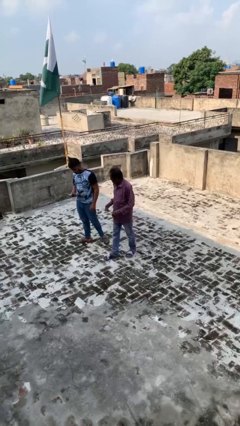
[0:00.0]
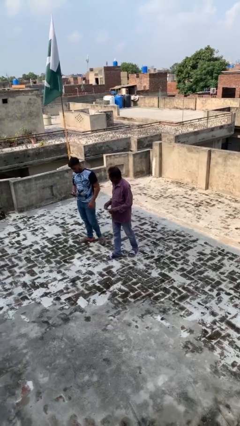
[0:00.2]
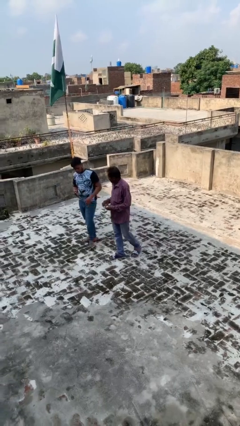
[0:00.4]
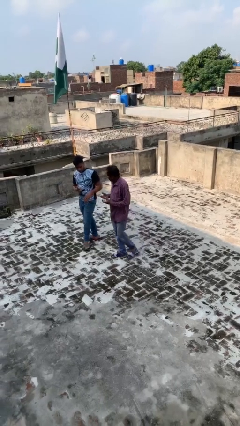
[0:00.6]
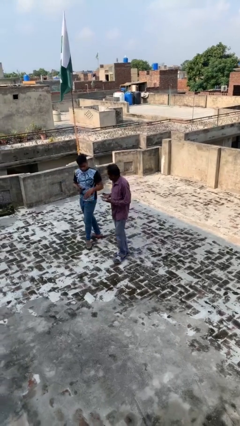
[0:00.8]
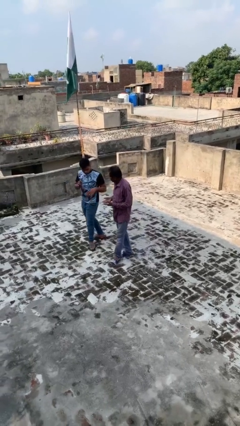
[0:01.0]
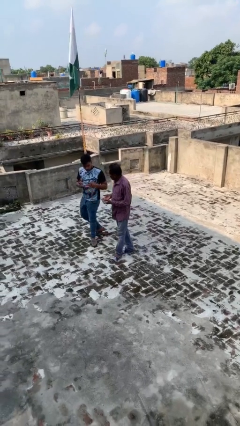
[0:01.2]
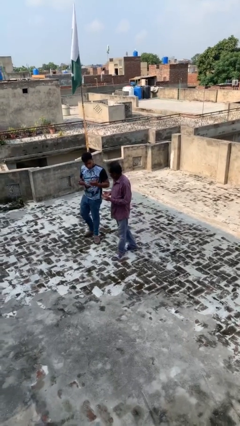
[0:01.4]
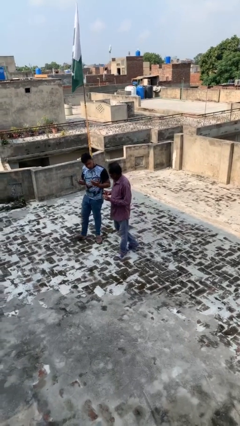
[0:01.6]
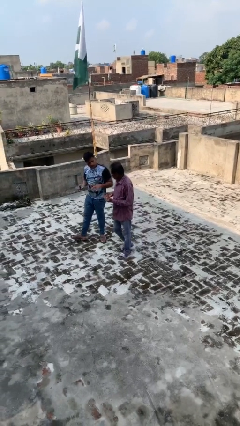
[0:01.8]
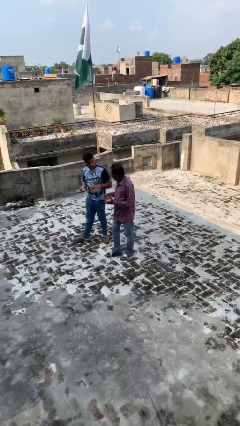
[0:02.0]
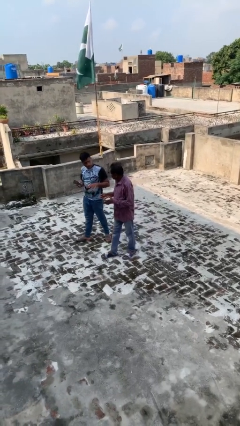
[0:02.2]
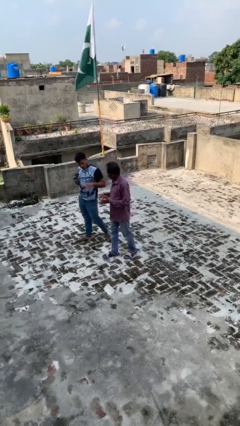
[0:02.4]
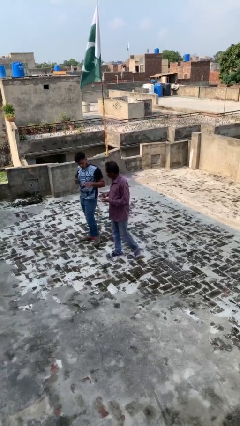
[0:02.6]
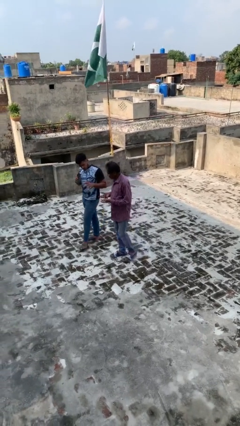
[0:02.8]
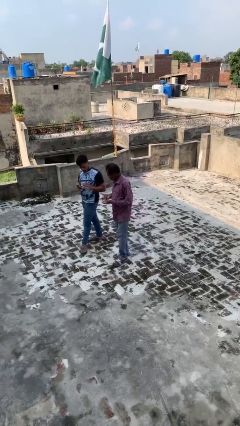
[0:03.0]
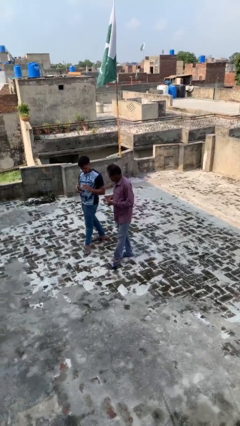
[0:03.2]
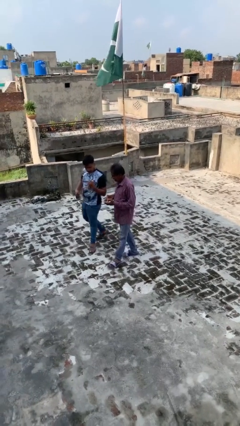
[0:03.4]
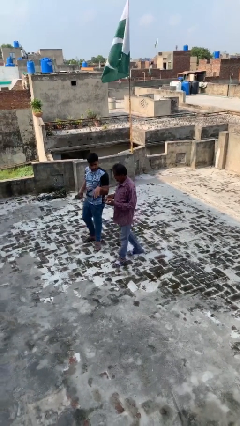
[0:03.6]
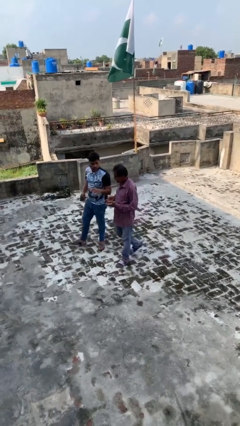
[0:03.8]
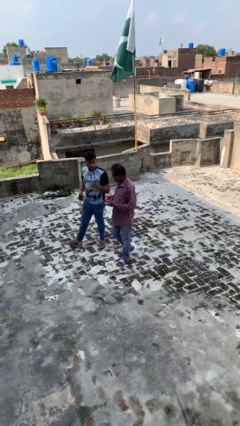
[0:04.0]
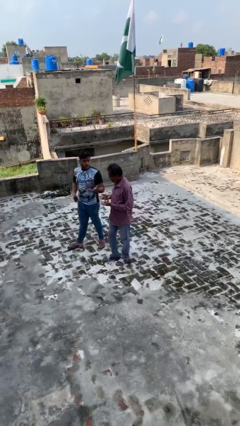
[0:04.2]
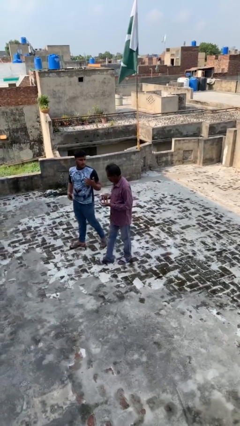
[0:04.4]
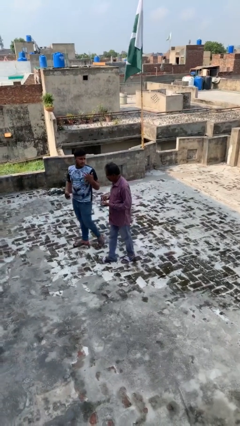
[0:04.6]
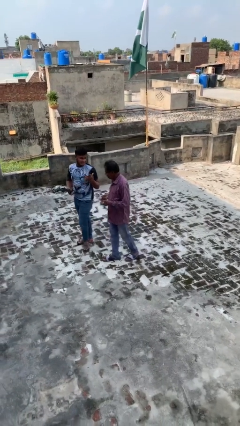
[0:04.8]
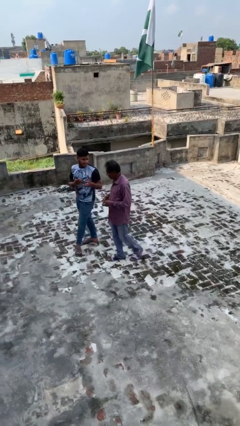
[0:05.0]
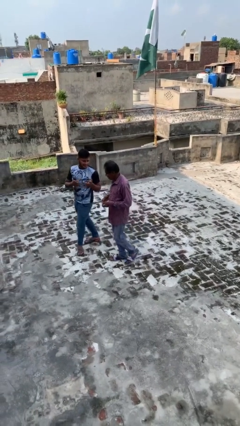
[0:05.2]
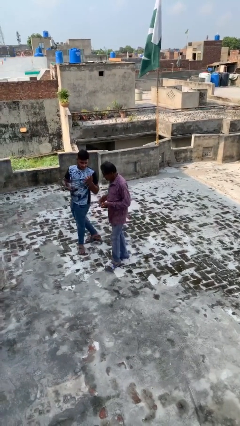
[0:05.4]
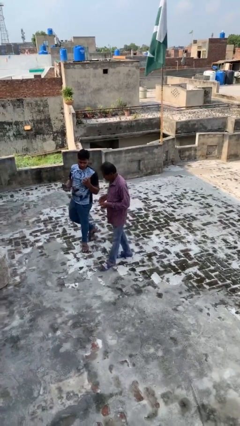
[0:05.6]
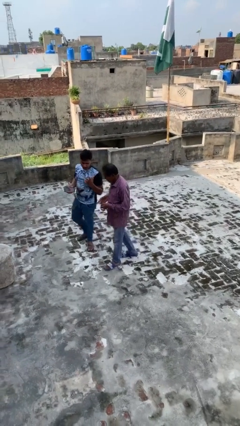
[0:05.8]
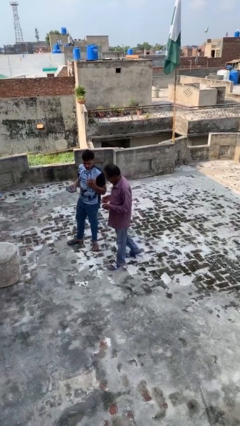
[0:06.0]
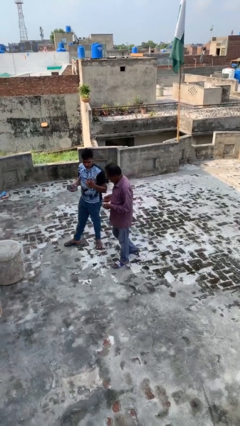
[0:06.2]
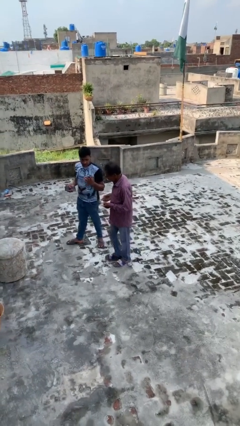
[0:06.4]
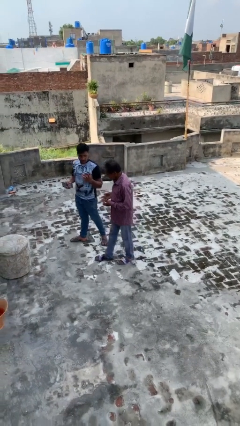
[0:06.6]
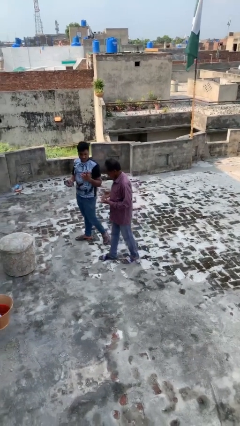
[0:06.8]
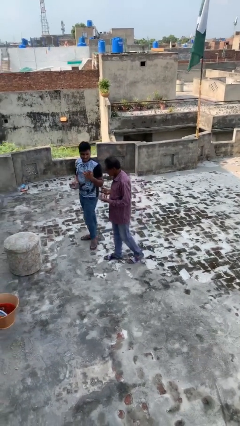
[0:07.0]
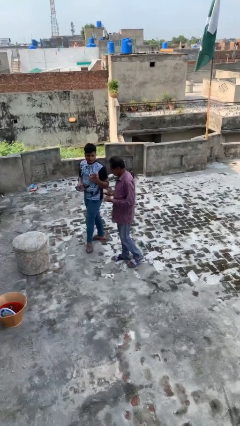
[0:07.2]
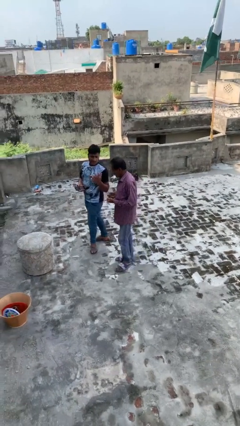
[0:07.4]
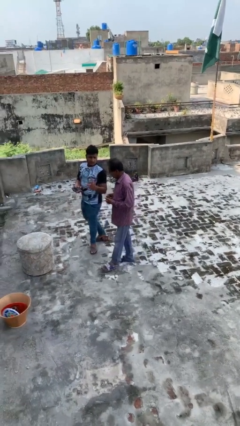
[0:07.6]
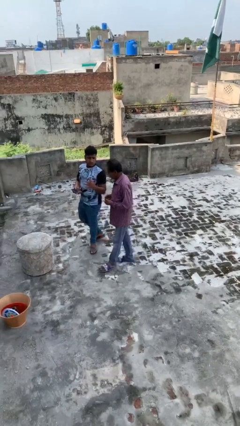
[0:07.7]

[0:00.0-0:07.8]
person talks to person

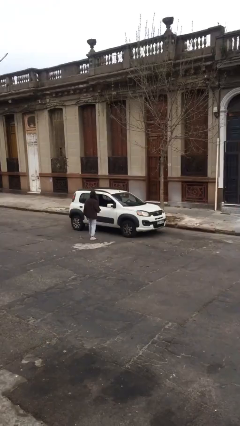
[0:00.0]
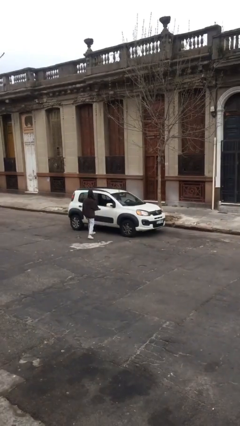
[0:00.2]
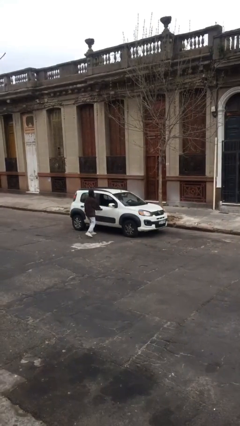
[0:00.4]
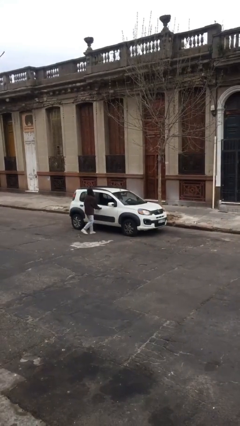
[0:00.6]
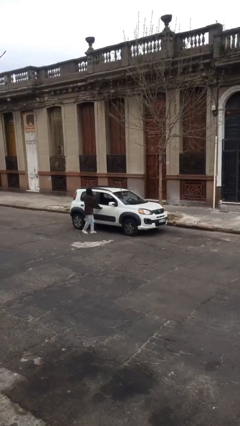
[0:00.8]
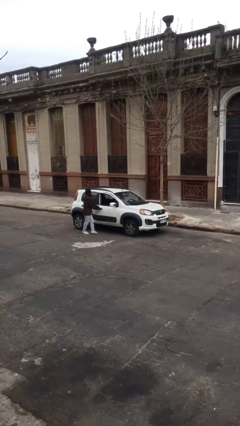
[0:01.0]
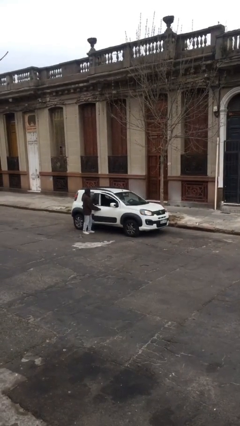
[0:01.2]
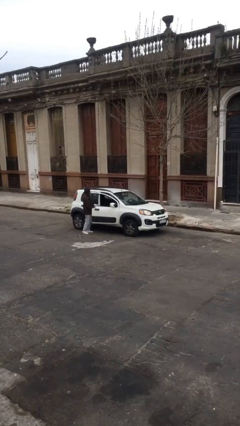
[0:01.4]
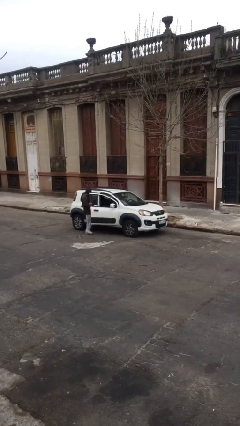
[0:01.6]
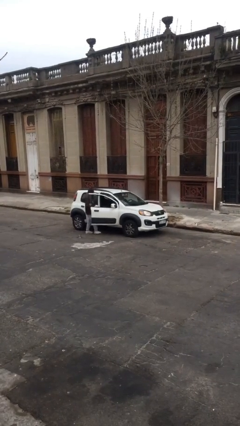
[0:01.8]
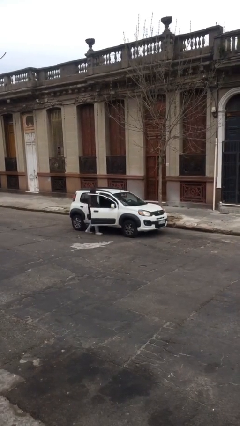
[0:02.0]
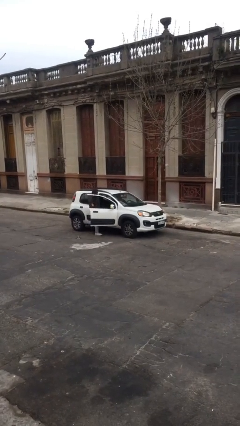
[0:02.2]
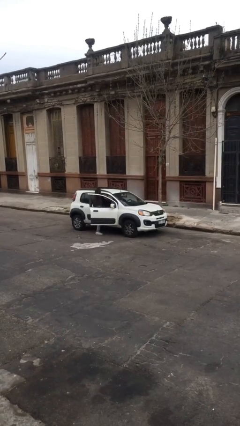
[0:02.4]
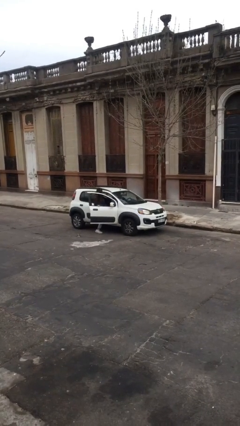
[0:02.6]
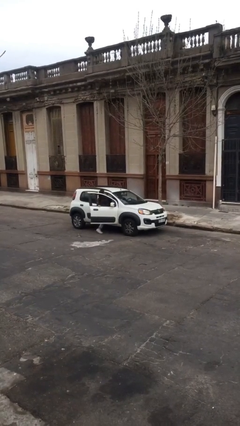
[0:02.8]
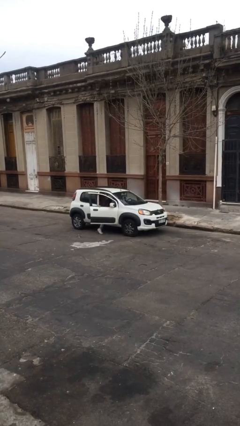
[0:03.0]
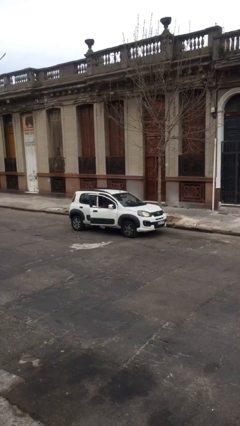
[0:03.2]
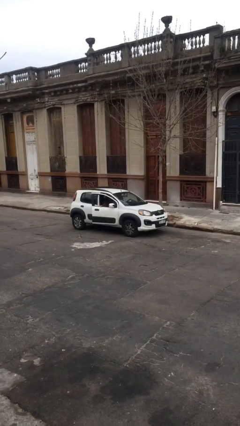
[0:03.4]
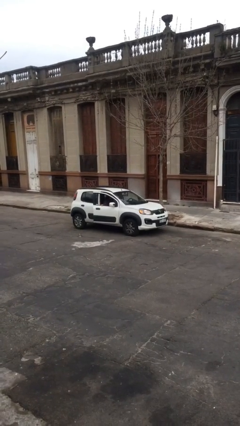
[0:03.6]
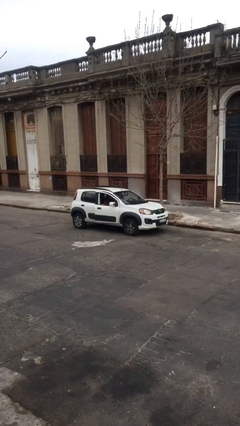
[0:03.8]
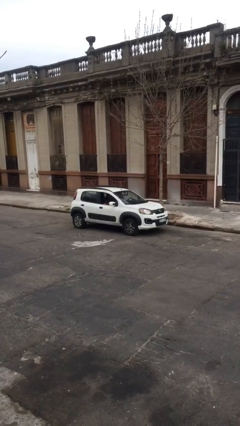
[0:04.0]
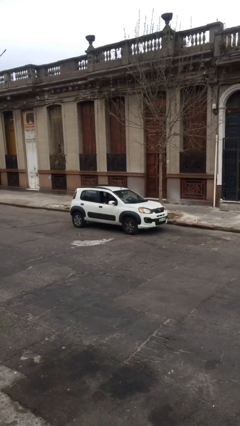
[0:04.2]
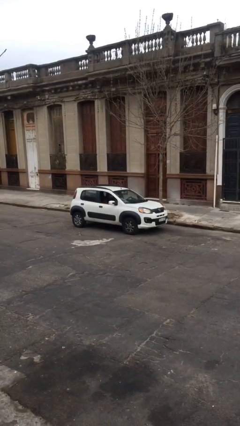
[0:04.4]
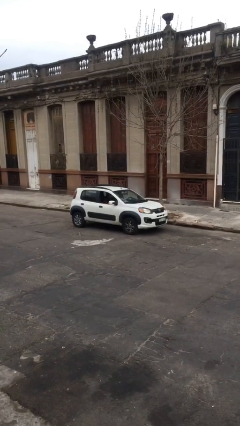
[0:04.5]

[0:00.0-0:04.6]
car picks up person

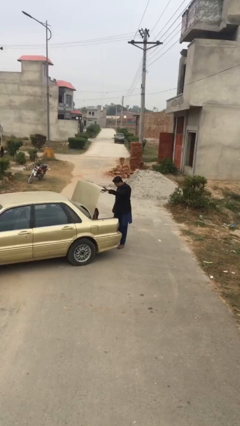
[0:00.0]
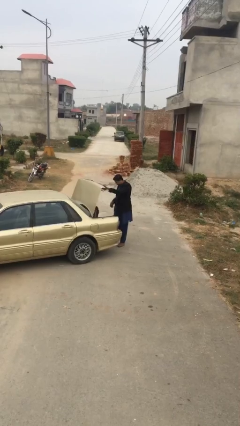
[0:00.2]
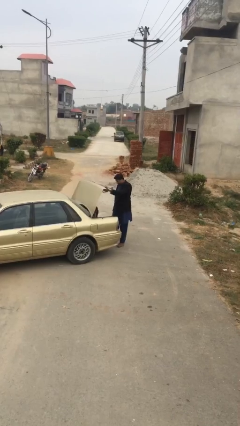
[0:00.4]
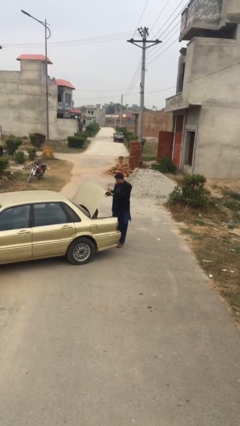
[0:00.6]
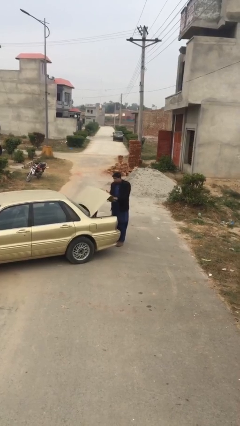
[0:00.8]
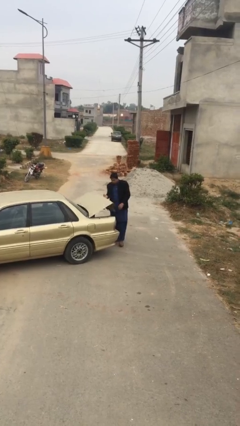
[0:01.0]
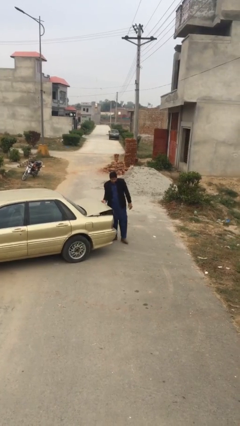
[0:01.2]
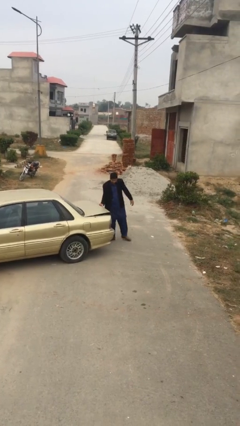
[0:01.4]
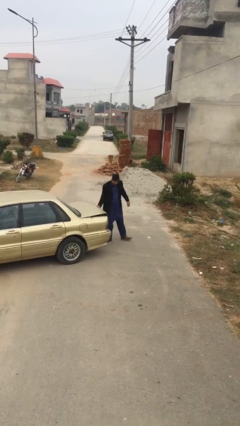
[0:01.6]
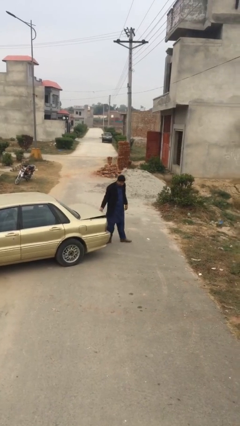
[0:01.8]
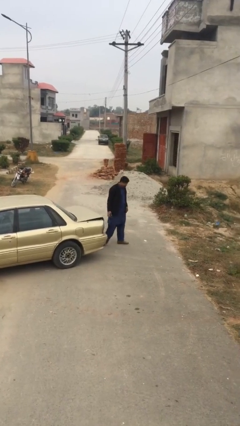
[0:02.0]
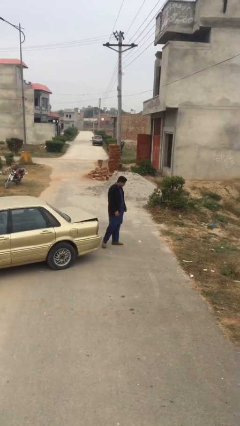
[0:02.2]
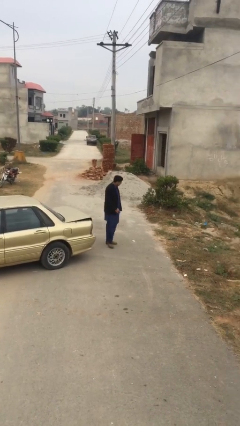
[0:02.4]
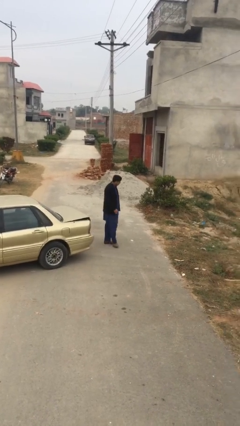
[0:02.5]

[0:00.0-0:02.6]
person closes car trunk

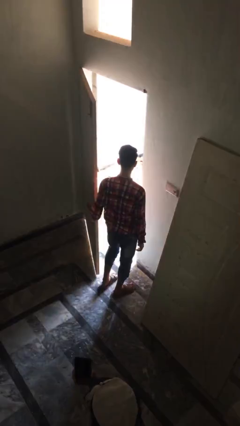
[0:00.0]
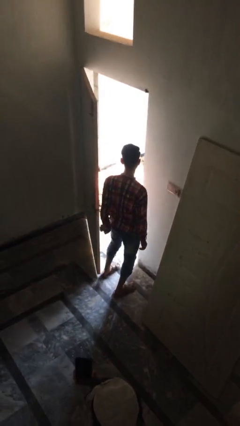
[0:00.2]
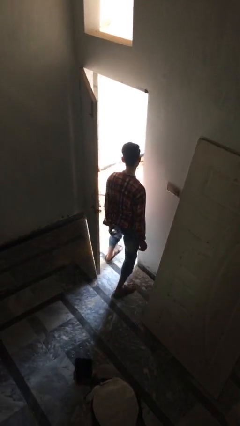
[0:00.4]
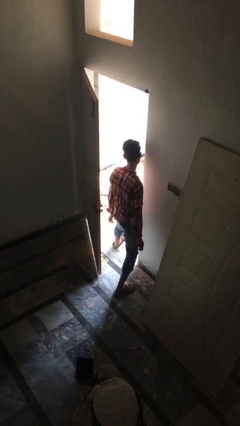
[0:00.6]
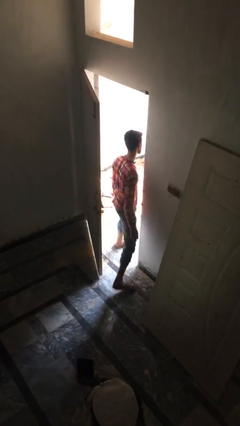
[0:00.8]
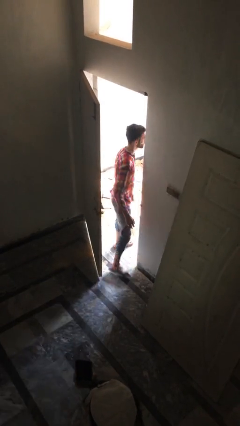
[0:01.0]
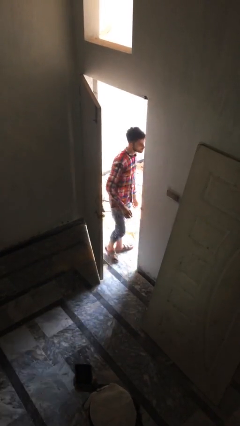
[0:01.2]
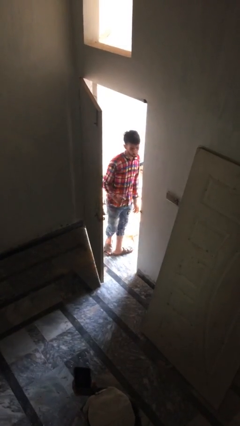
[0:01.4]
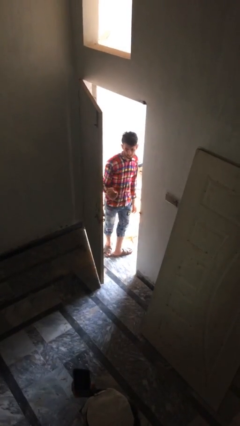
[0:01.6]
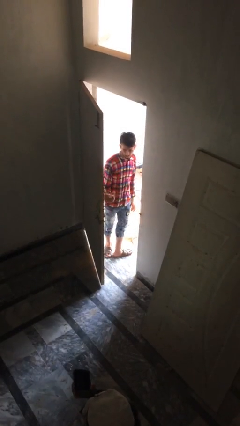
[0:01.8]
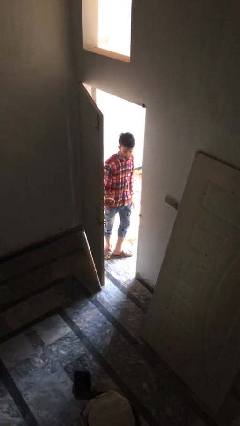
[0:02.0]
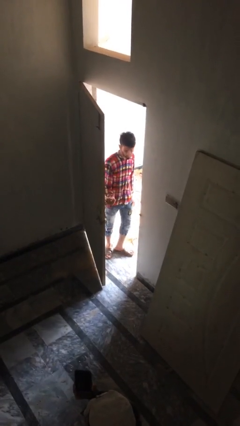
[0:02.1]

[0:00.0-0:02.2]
person exits scene through structure

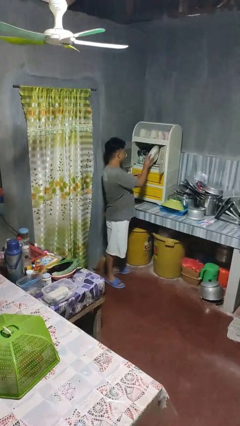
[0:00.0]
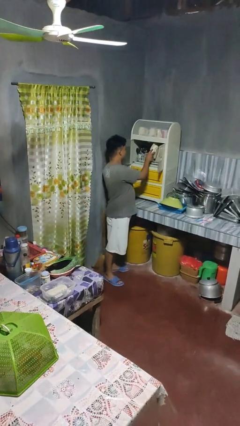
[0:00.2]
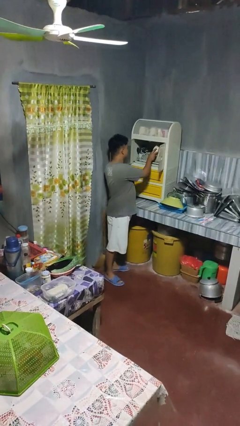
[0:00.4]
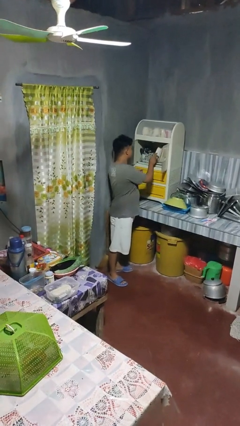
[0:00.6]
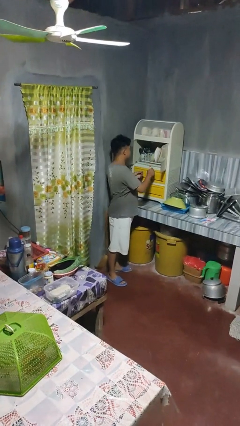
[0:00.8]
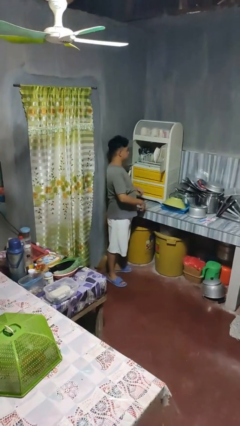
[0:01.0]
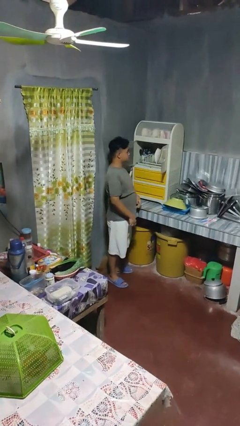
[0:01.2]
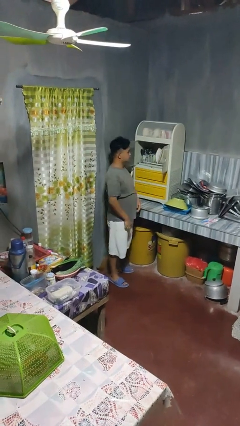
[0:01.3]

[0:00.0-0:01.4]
person puts object in cabinet
